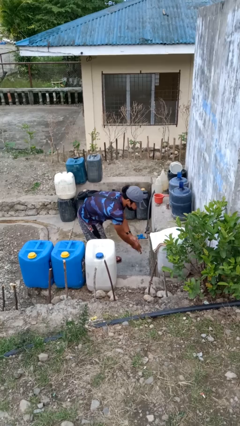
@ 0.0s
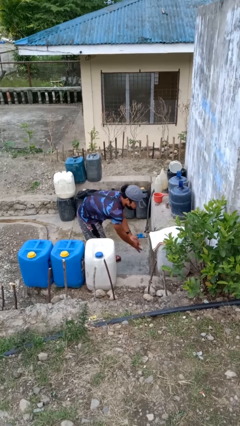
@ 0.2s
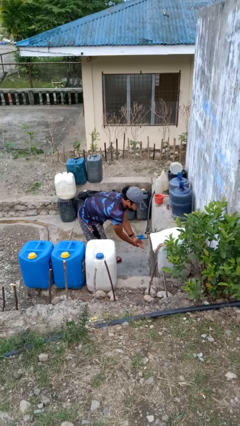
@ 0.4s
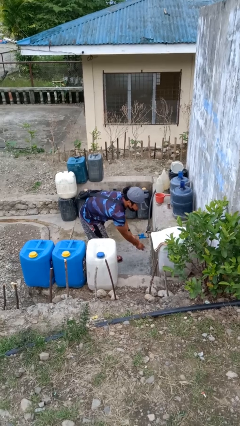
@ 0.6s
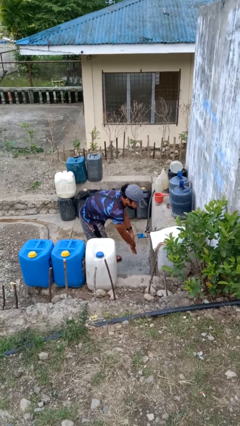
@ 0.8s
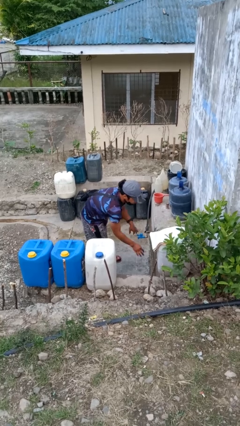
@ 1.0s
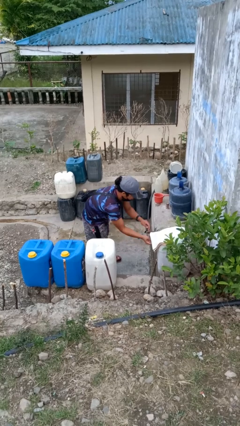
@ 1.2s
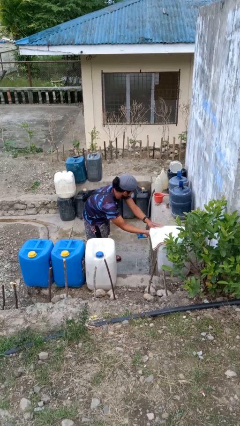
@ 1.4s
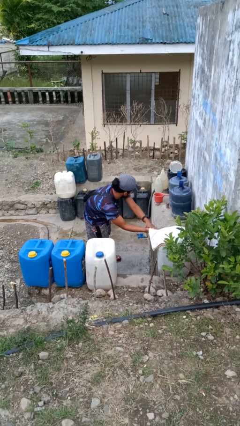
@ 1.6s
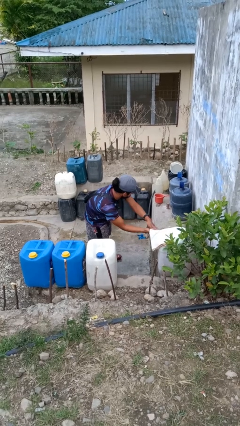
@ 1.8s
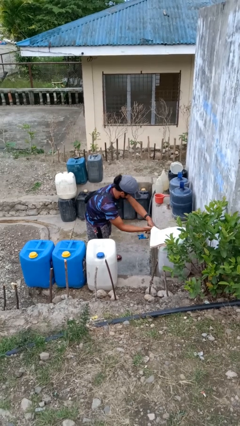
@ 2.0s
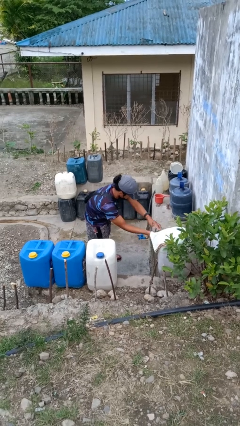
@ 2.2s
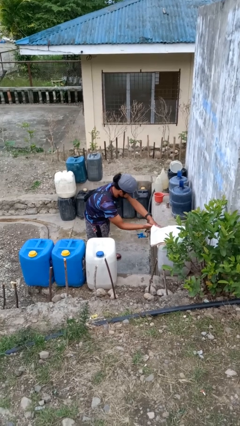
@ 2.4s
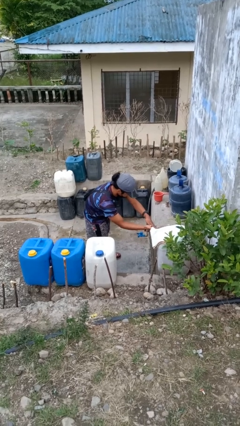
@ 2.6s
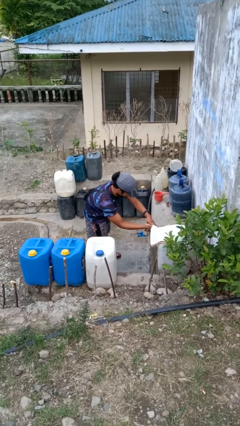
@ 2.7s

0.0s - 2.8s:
person dries hands with towel

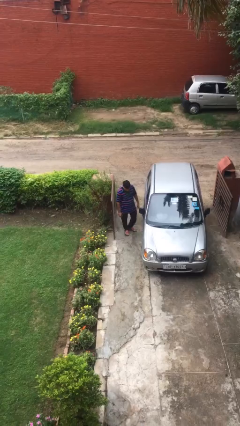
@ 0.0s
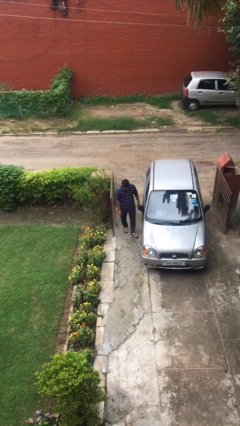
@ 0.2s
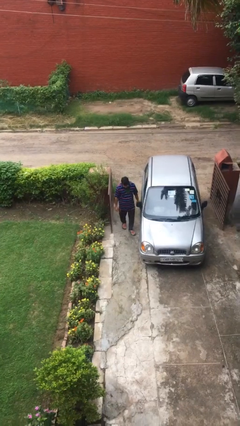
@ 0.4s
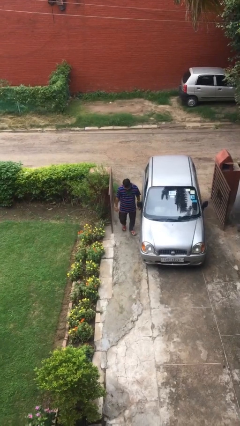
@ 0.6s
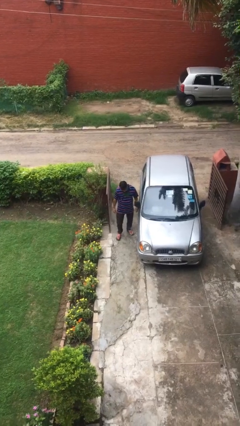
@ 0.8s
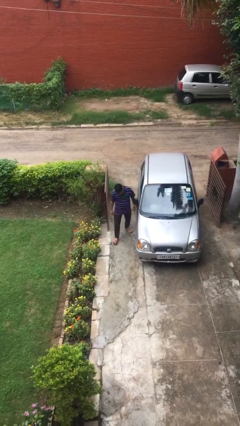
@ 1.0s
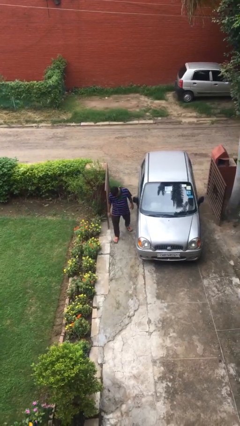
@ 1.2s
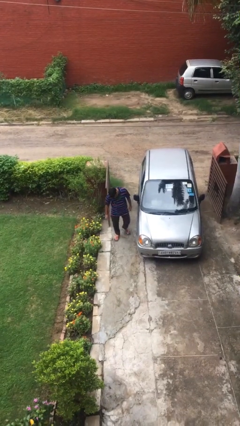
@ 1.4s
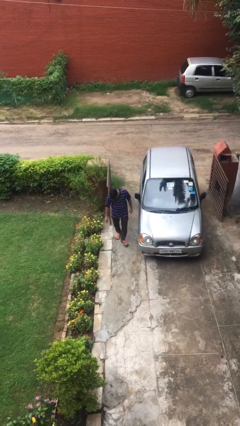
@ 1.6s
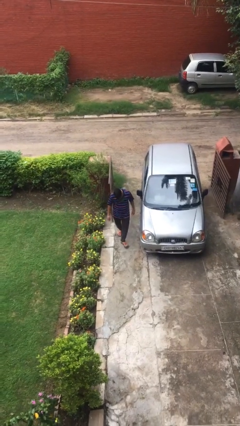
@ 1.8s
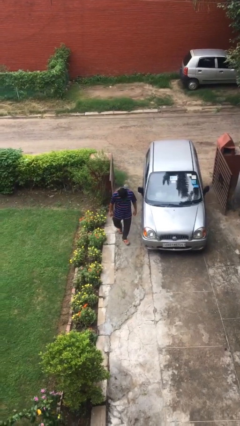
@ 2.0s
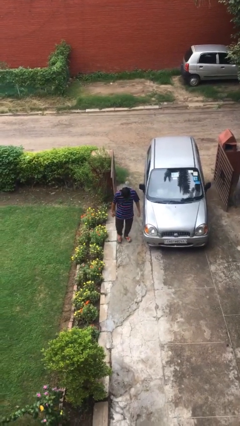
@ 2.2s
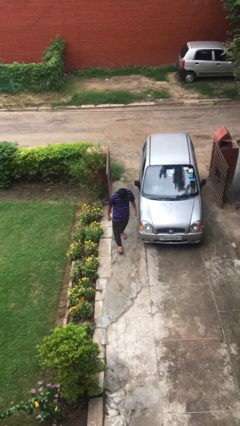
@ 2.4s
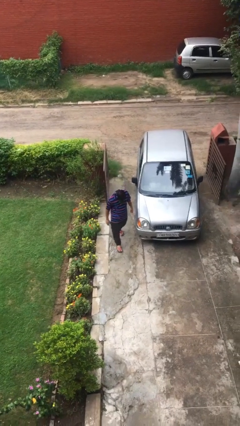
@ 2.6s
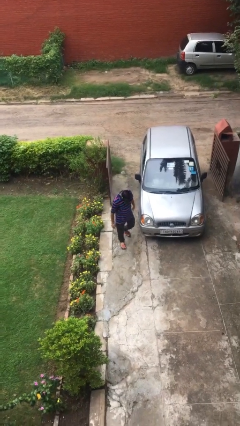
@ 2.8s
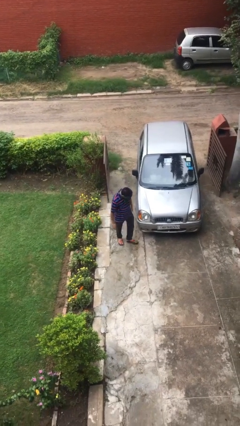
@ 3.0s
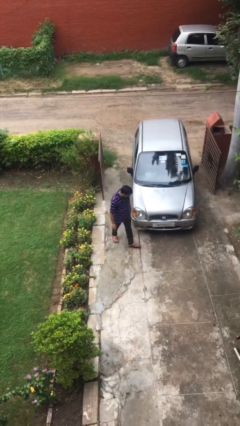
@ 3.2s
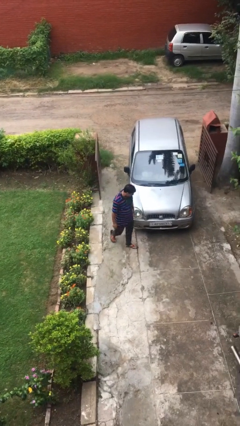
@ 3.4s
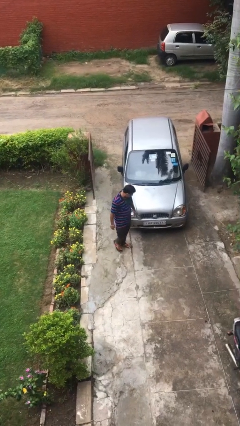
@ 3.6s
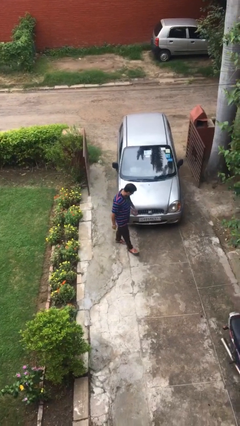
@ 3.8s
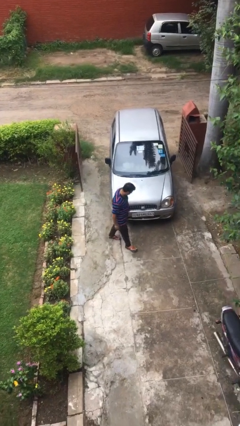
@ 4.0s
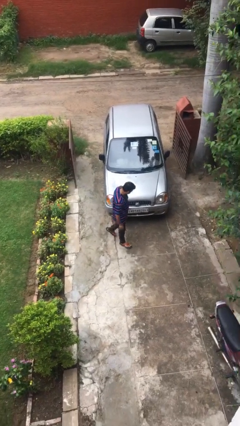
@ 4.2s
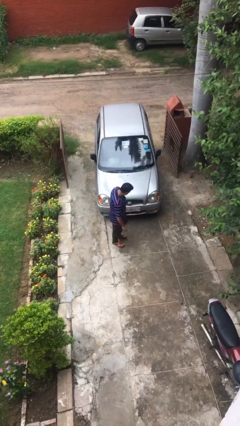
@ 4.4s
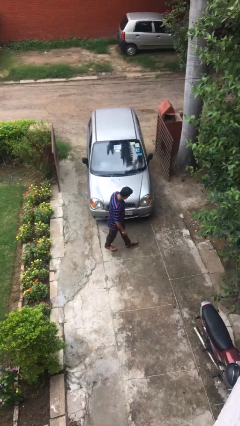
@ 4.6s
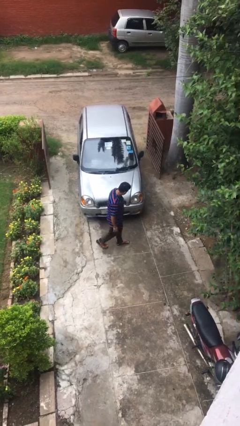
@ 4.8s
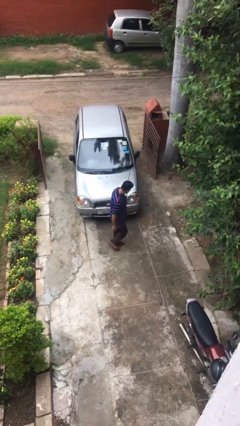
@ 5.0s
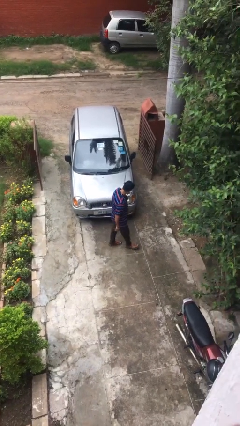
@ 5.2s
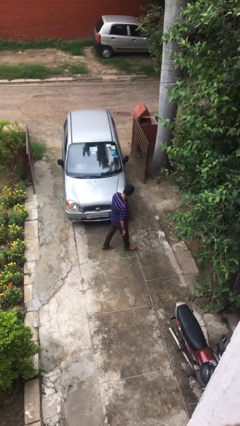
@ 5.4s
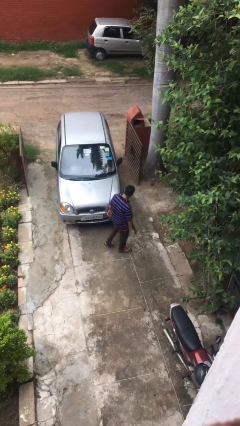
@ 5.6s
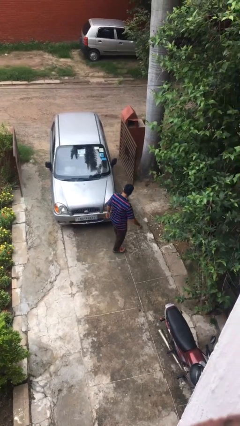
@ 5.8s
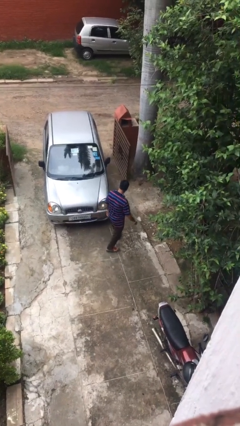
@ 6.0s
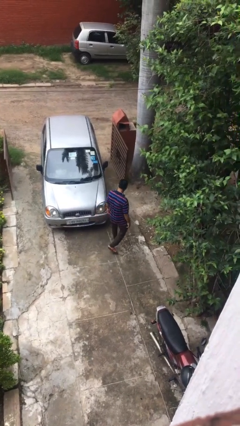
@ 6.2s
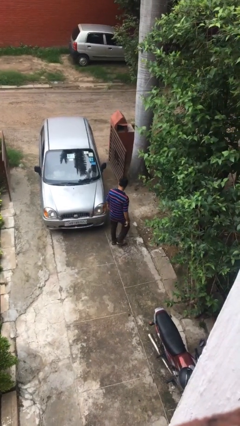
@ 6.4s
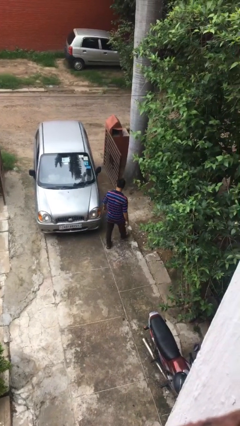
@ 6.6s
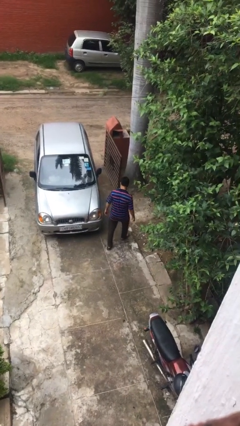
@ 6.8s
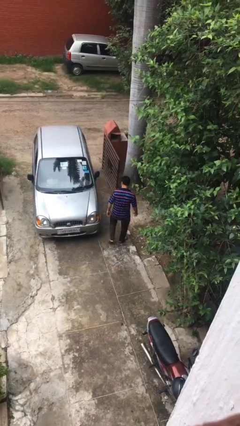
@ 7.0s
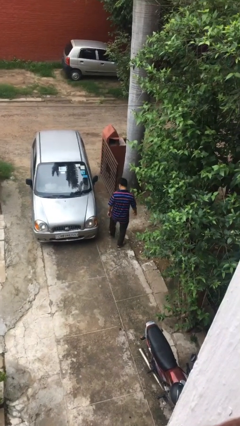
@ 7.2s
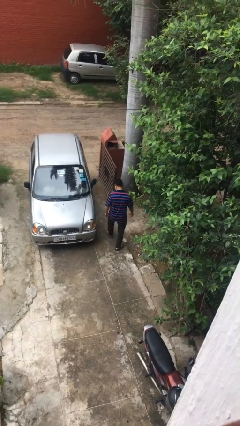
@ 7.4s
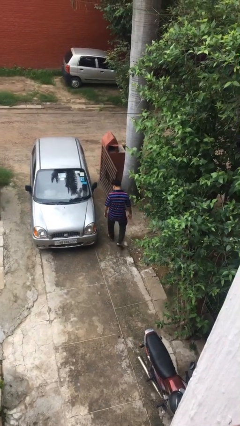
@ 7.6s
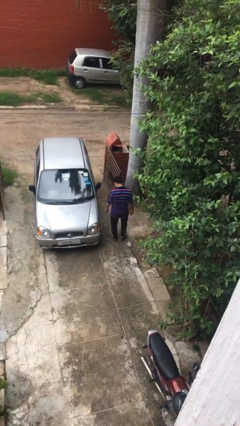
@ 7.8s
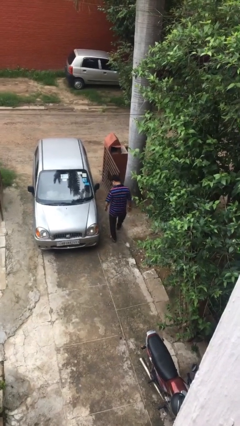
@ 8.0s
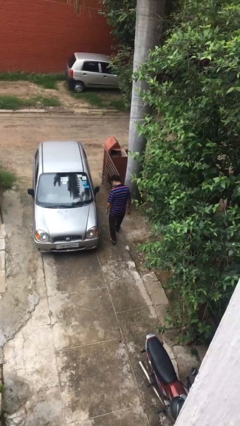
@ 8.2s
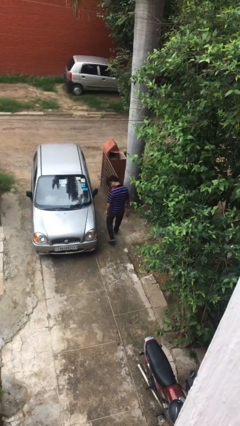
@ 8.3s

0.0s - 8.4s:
person walks around car

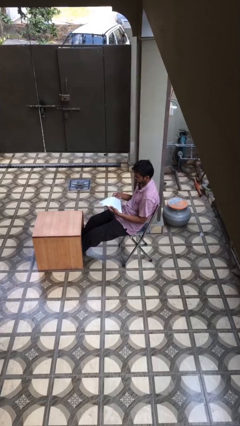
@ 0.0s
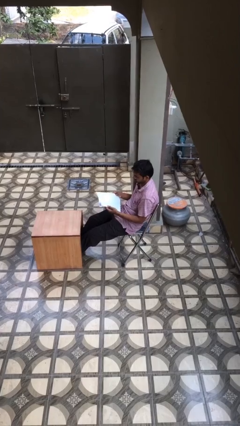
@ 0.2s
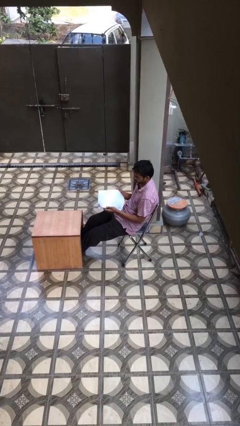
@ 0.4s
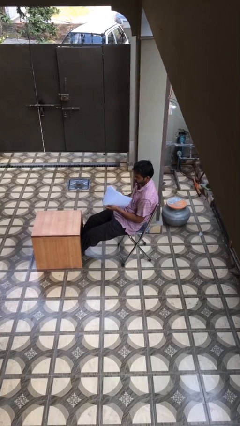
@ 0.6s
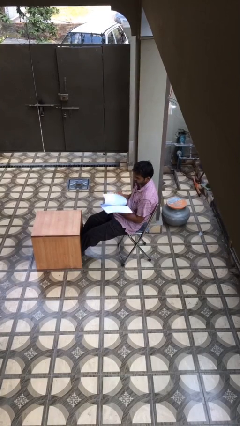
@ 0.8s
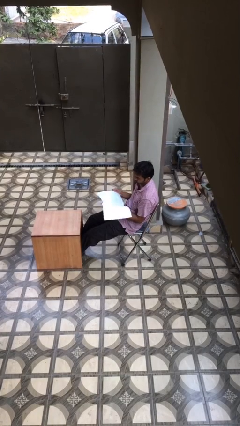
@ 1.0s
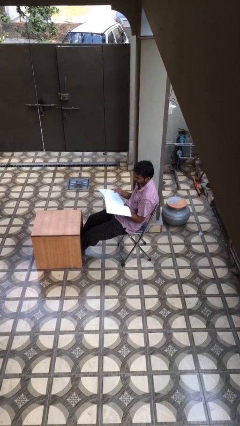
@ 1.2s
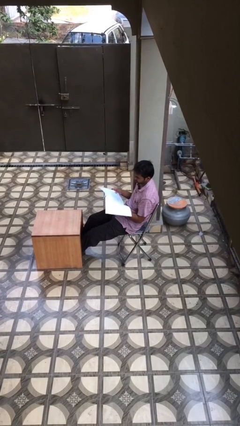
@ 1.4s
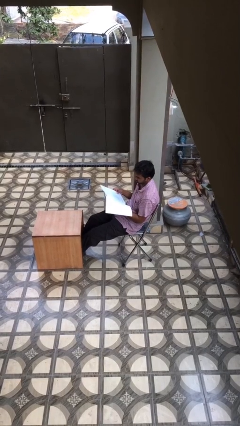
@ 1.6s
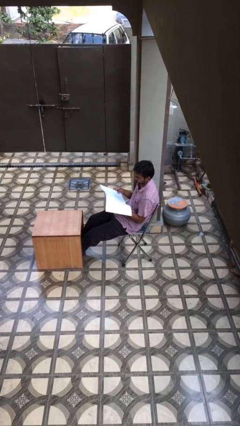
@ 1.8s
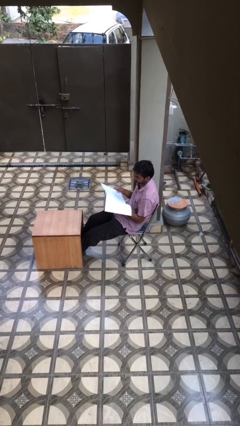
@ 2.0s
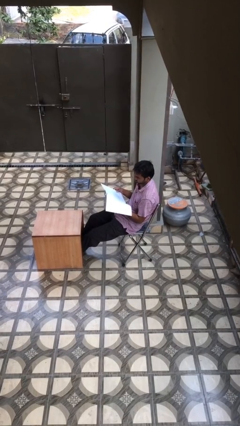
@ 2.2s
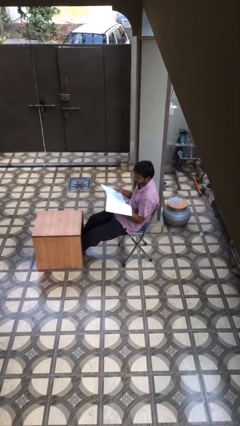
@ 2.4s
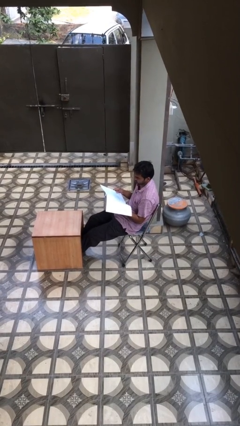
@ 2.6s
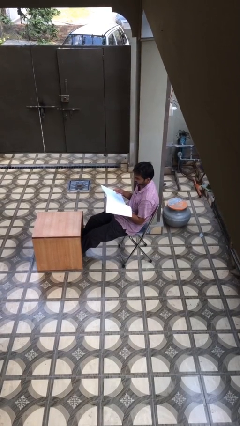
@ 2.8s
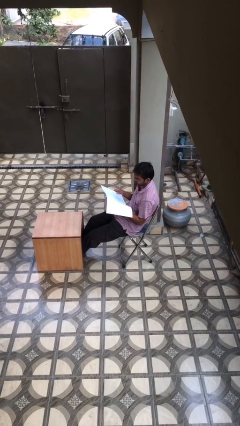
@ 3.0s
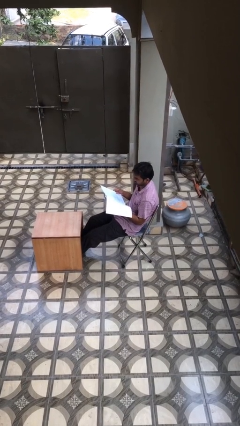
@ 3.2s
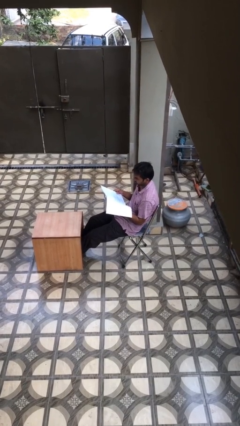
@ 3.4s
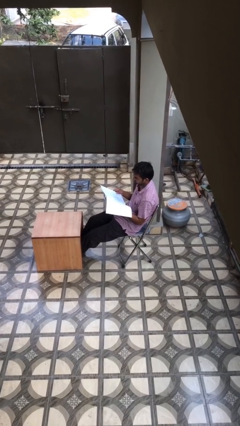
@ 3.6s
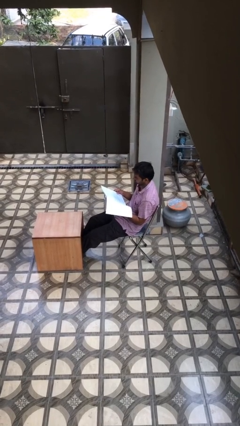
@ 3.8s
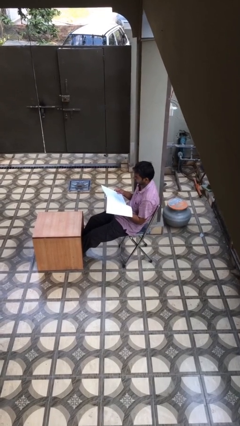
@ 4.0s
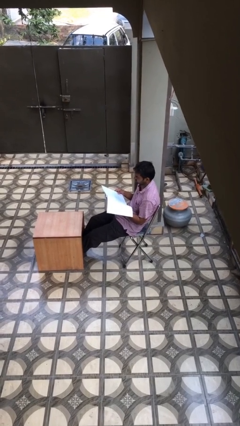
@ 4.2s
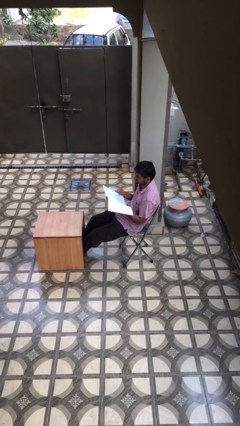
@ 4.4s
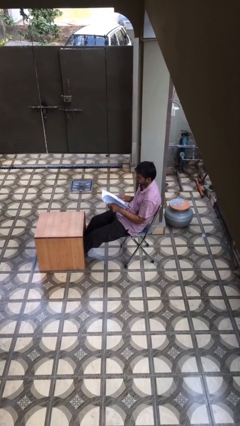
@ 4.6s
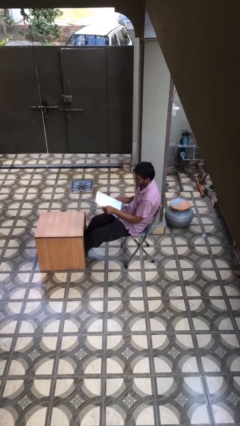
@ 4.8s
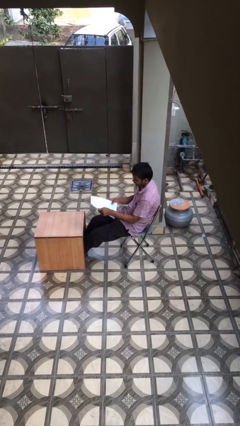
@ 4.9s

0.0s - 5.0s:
person reads document

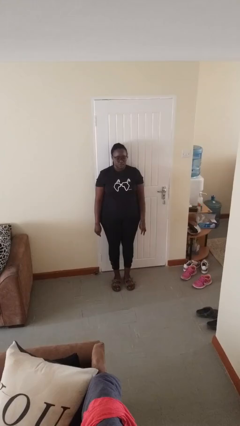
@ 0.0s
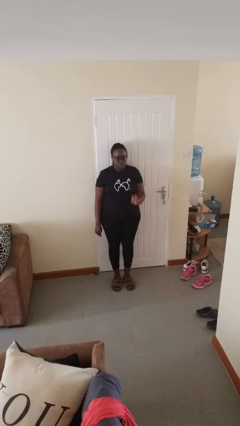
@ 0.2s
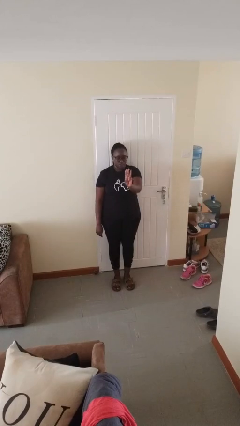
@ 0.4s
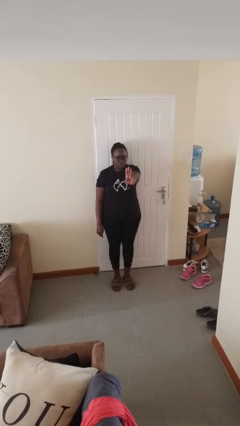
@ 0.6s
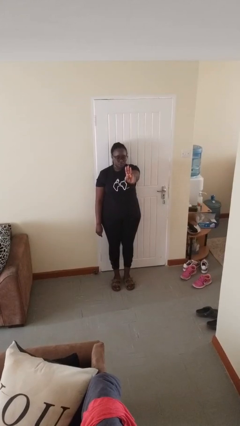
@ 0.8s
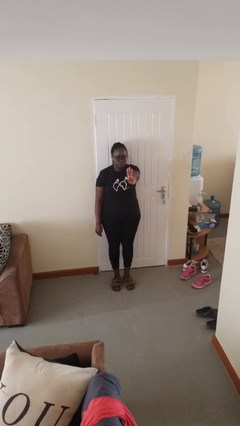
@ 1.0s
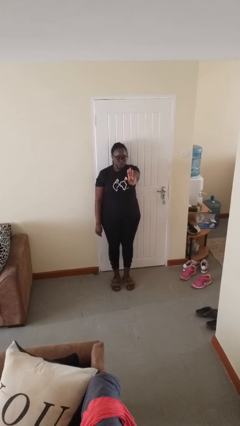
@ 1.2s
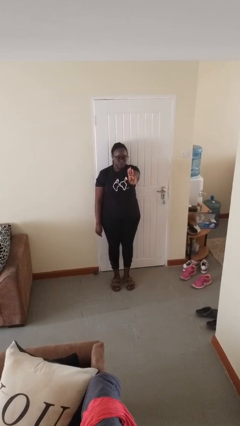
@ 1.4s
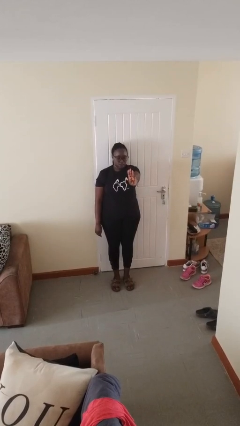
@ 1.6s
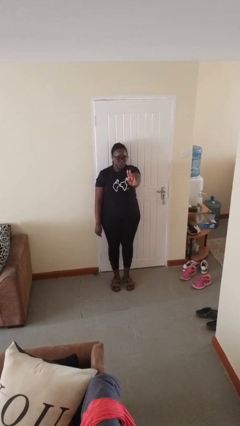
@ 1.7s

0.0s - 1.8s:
person gestures number three
